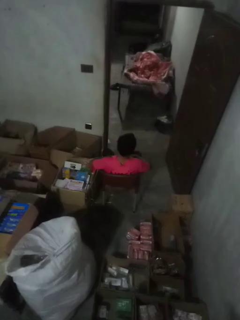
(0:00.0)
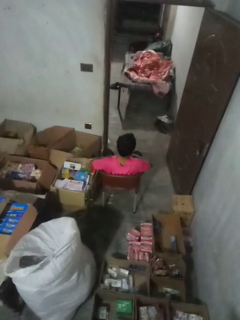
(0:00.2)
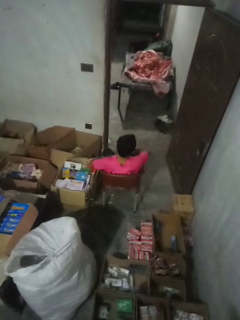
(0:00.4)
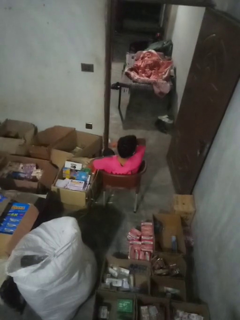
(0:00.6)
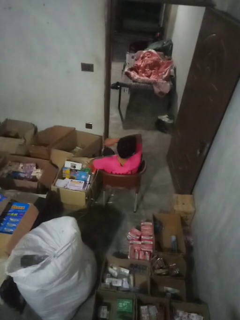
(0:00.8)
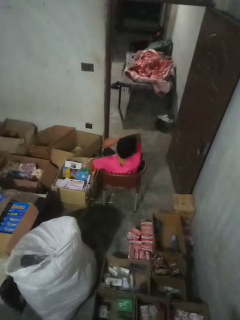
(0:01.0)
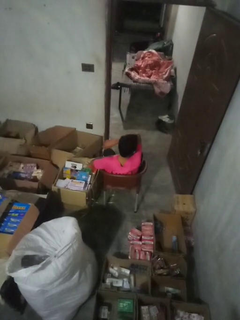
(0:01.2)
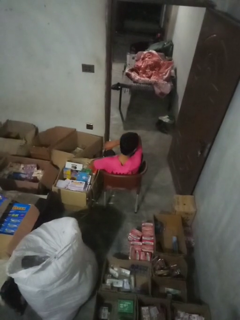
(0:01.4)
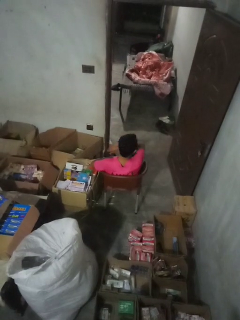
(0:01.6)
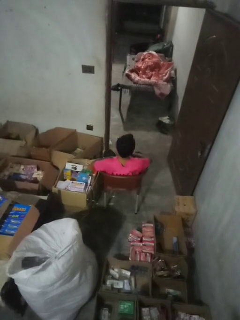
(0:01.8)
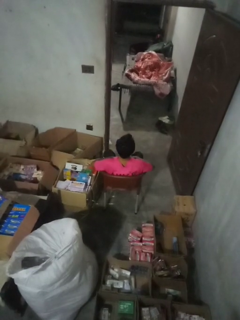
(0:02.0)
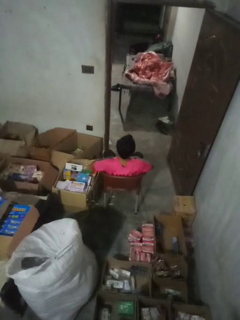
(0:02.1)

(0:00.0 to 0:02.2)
person sneezes into arm

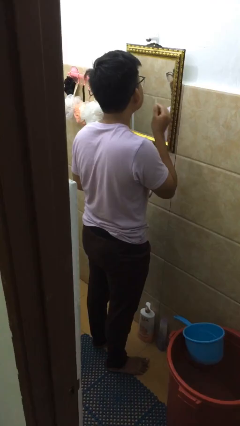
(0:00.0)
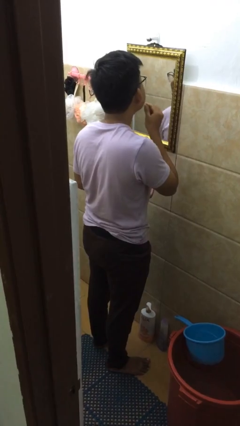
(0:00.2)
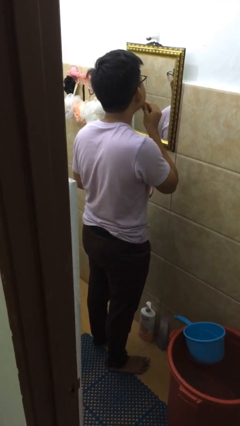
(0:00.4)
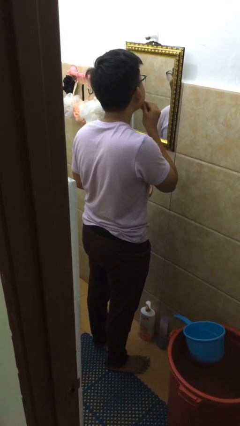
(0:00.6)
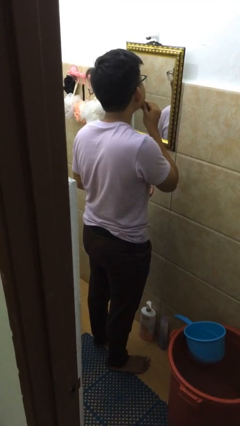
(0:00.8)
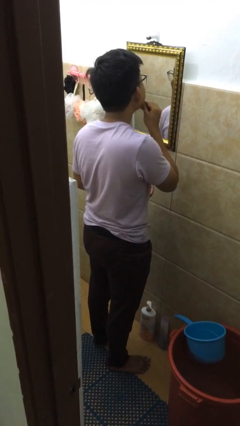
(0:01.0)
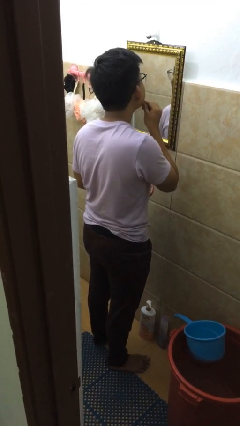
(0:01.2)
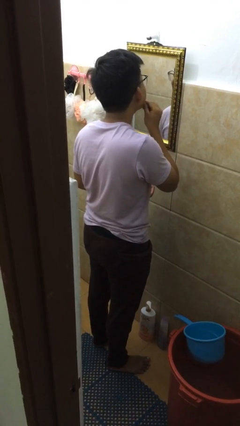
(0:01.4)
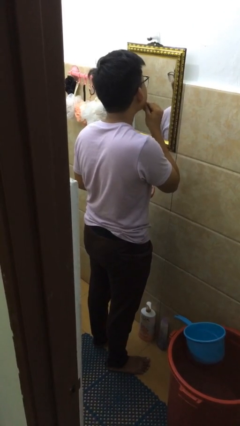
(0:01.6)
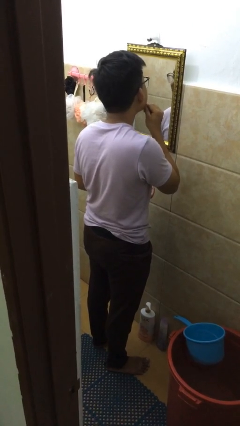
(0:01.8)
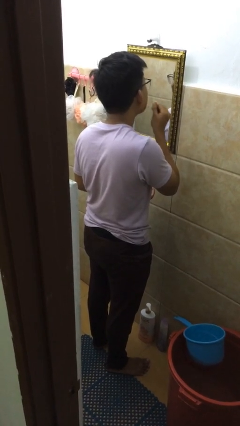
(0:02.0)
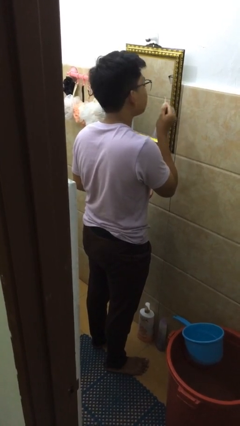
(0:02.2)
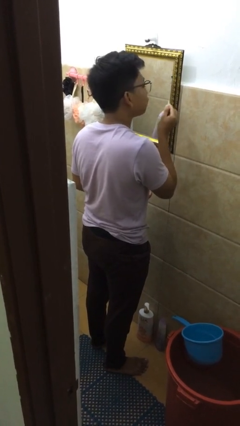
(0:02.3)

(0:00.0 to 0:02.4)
person flosses

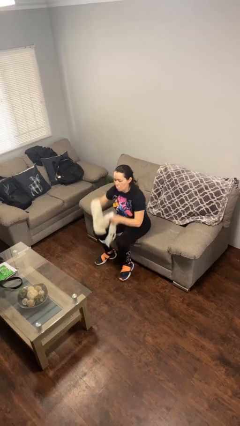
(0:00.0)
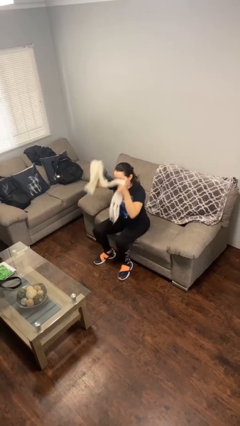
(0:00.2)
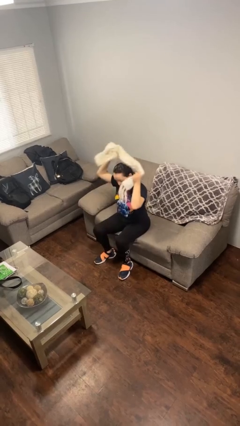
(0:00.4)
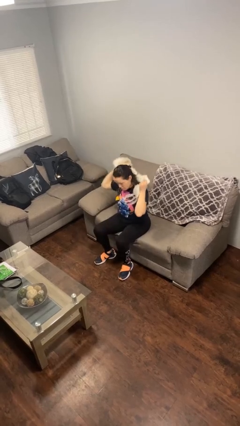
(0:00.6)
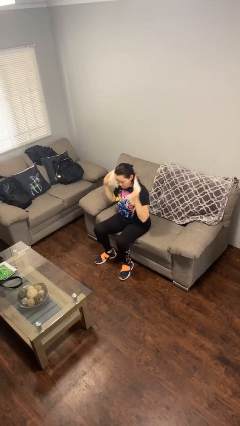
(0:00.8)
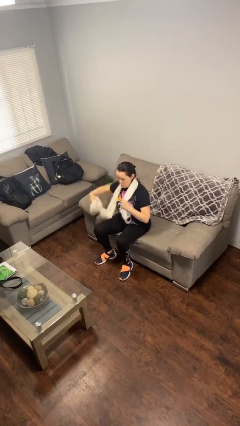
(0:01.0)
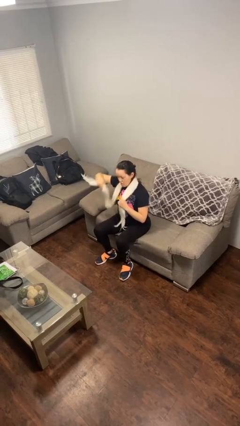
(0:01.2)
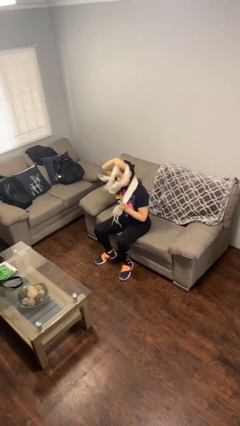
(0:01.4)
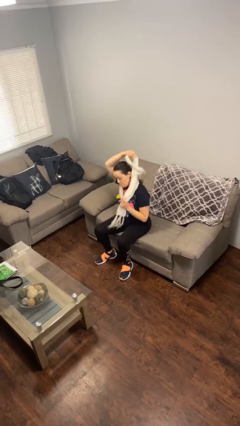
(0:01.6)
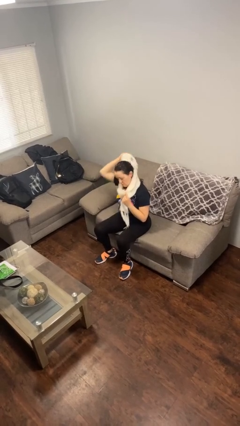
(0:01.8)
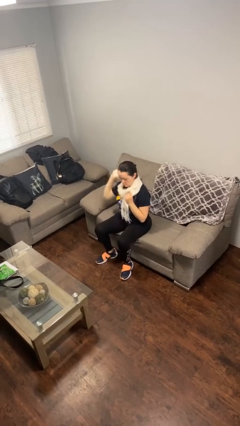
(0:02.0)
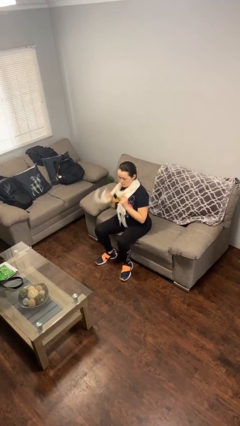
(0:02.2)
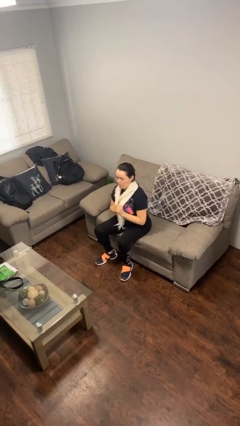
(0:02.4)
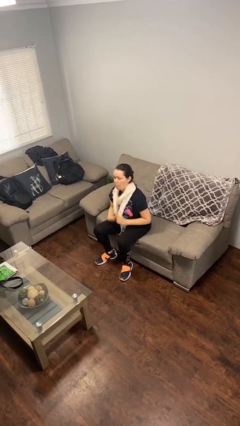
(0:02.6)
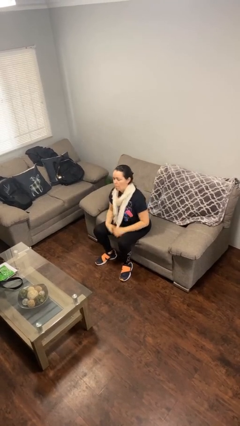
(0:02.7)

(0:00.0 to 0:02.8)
person puts on scarf

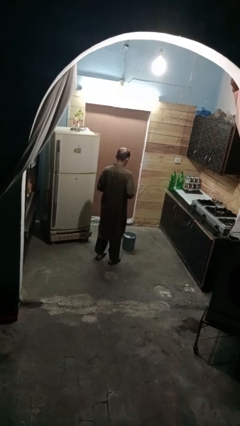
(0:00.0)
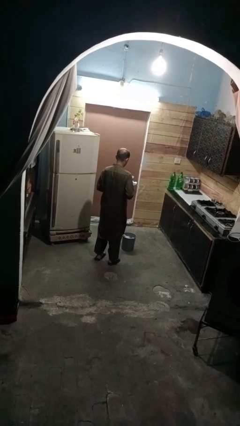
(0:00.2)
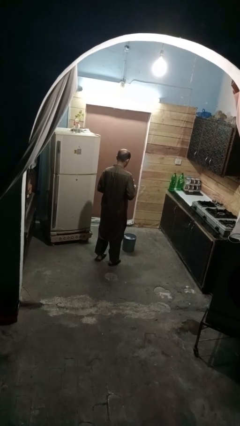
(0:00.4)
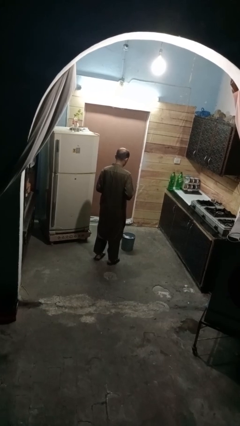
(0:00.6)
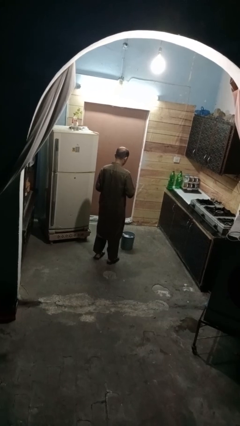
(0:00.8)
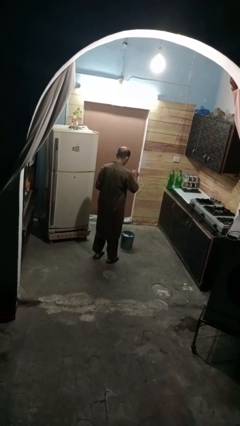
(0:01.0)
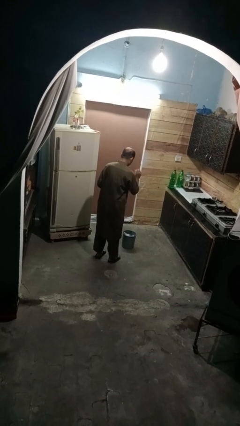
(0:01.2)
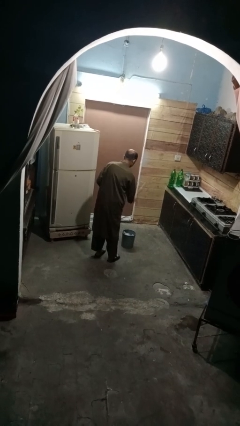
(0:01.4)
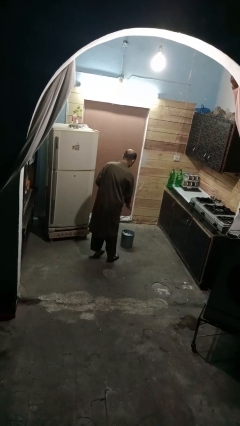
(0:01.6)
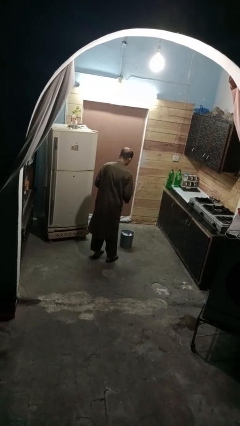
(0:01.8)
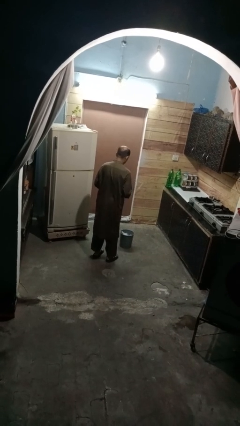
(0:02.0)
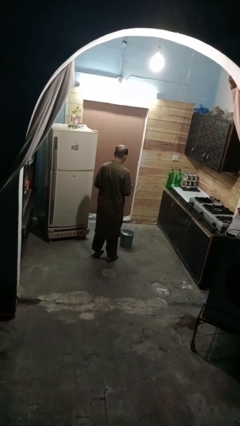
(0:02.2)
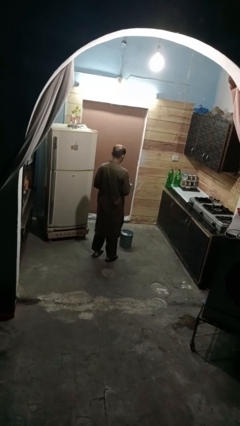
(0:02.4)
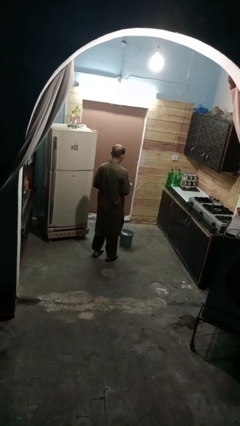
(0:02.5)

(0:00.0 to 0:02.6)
person discards trash

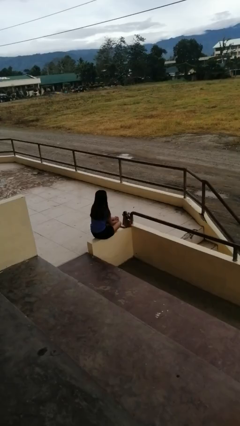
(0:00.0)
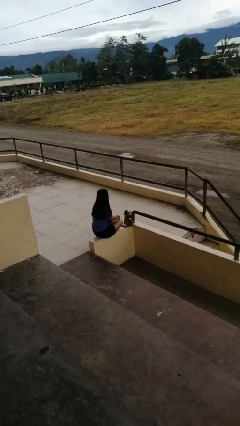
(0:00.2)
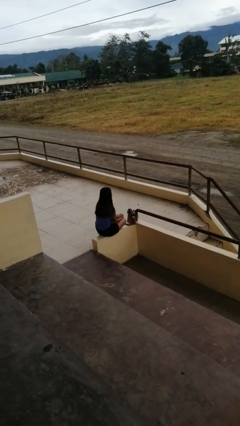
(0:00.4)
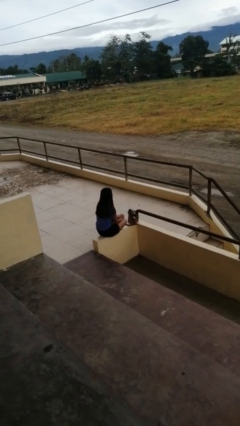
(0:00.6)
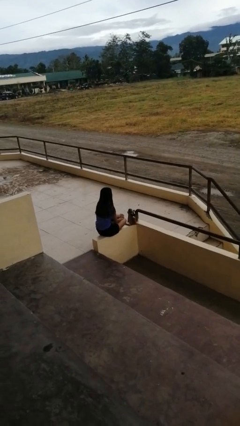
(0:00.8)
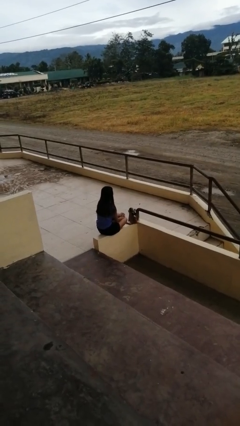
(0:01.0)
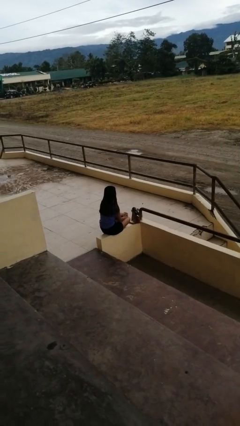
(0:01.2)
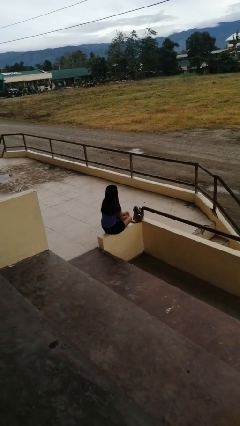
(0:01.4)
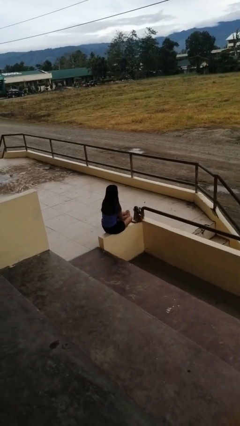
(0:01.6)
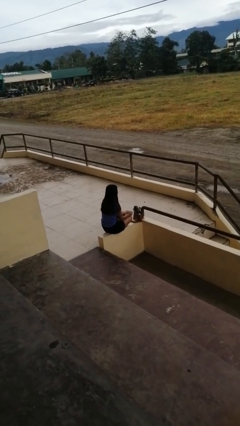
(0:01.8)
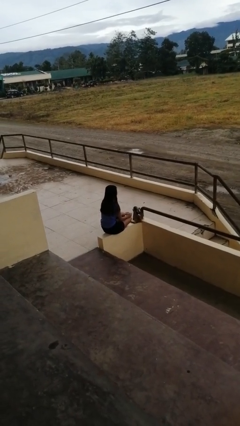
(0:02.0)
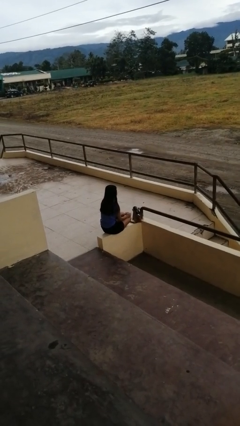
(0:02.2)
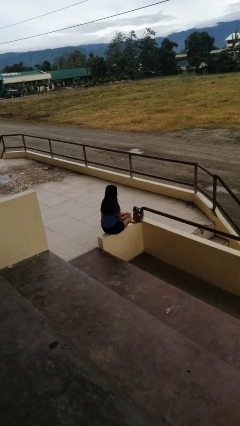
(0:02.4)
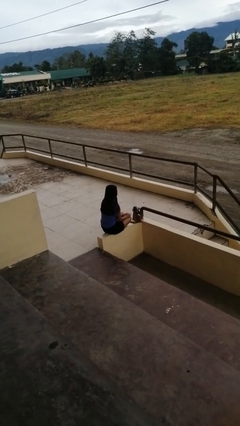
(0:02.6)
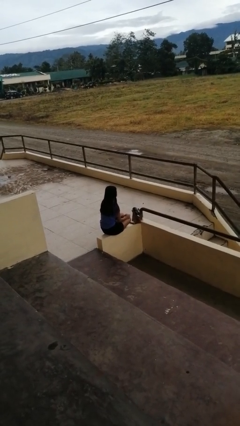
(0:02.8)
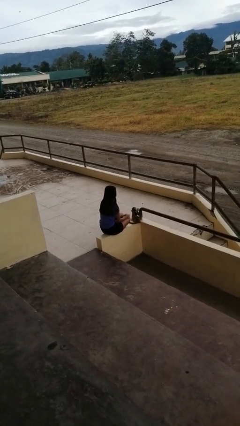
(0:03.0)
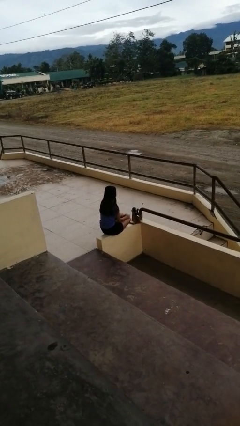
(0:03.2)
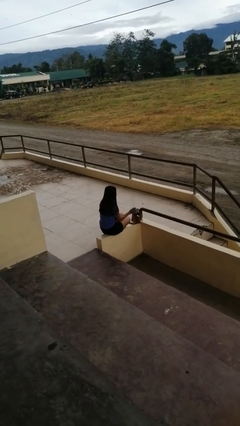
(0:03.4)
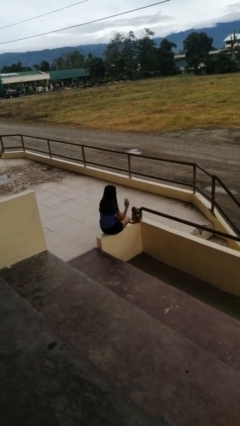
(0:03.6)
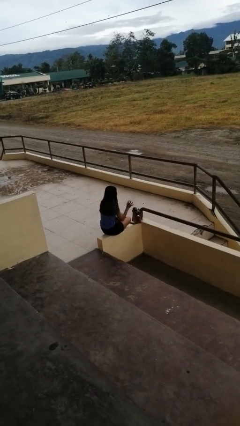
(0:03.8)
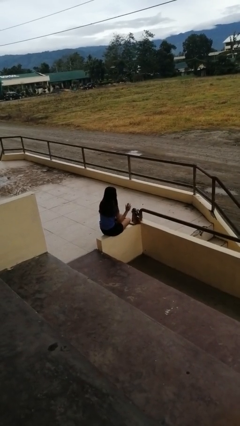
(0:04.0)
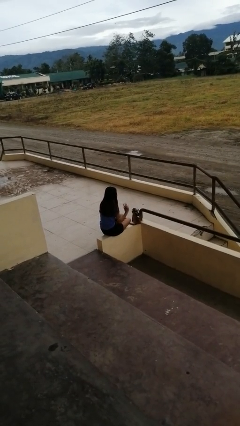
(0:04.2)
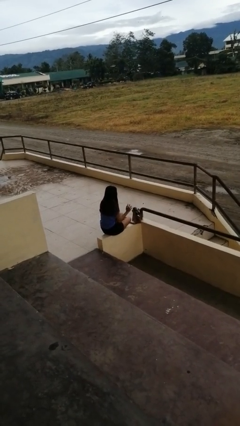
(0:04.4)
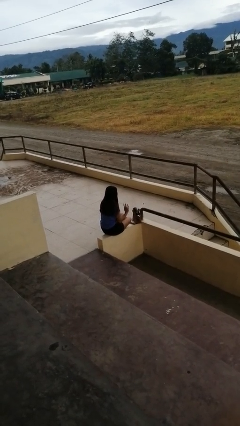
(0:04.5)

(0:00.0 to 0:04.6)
person waves hand over object

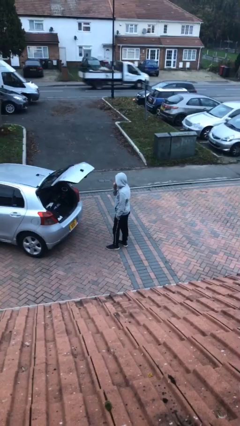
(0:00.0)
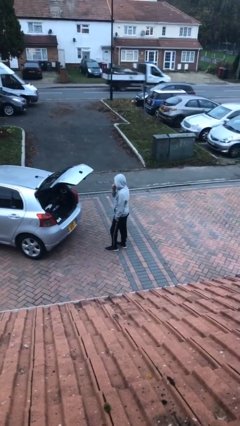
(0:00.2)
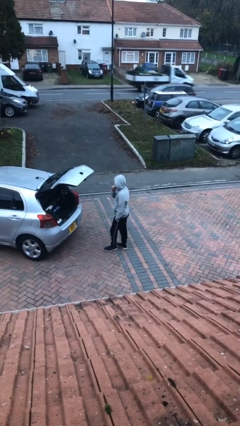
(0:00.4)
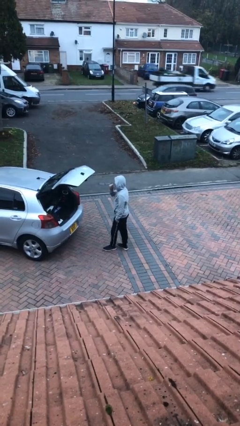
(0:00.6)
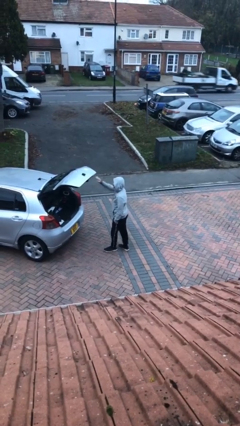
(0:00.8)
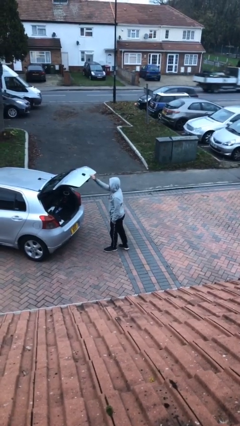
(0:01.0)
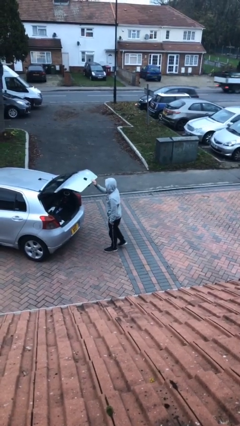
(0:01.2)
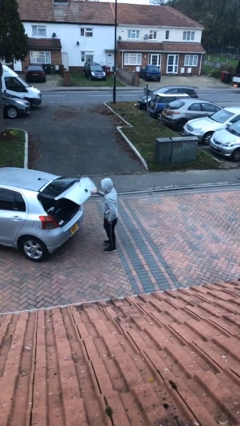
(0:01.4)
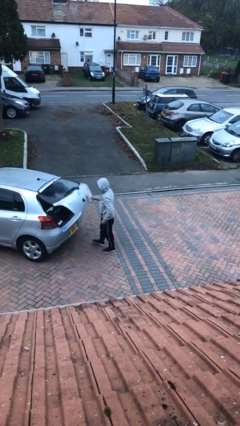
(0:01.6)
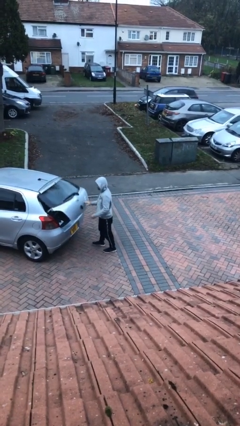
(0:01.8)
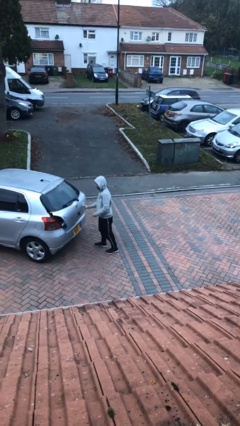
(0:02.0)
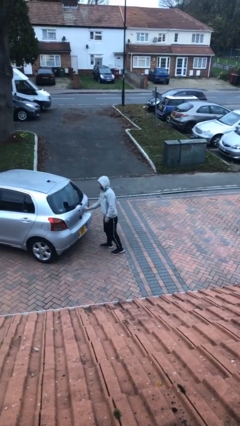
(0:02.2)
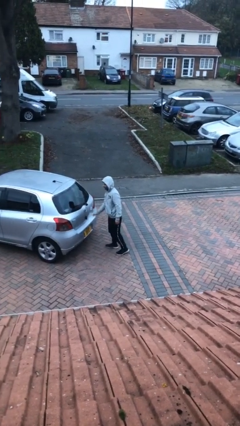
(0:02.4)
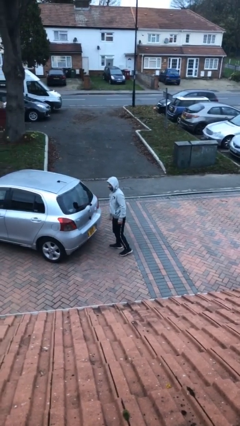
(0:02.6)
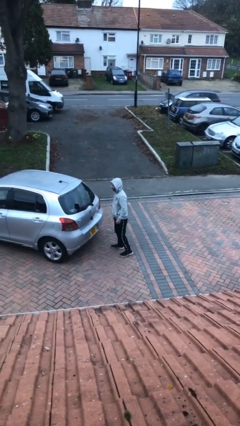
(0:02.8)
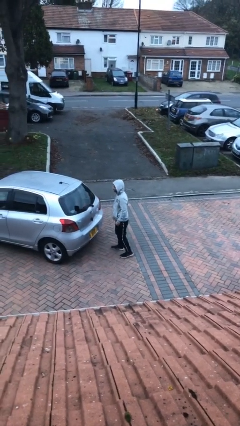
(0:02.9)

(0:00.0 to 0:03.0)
person closes car trunk
